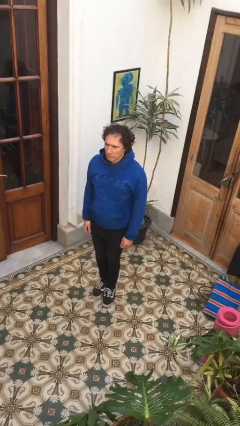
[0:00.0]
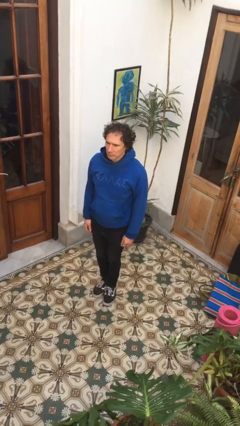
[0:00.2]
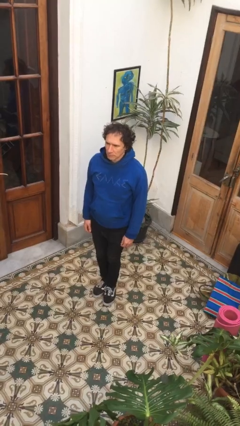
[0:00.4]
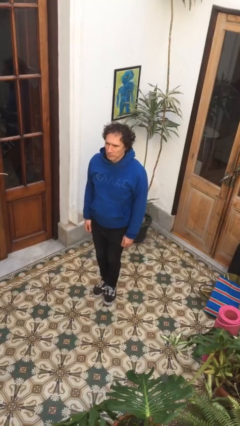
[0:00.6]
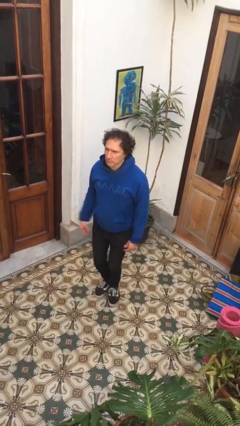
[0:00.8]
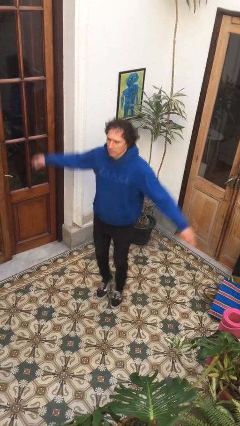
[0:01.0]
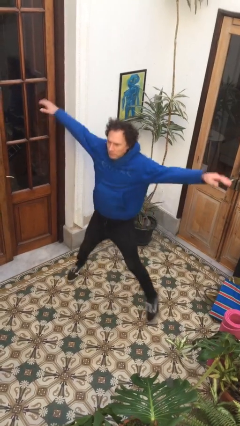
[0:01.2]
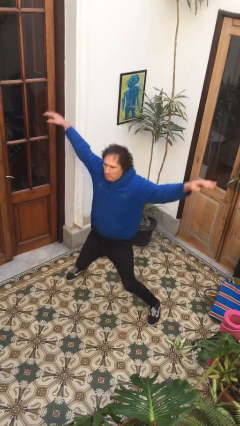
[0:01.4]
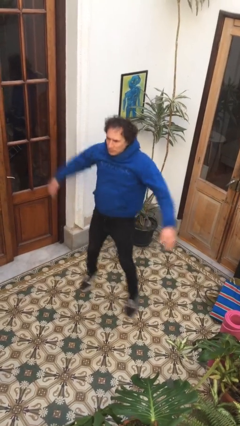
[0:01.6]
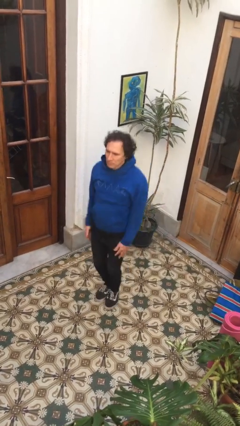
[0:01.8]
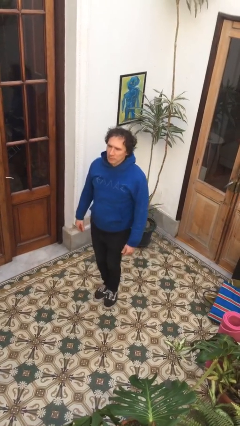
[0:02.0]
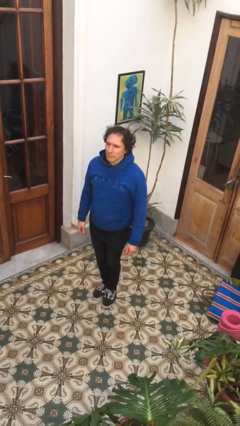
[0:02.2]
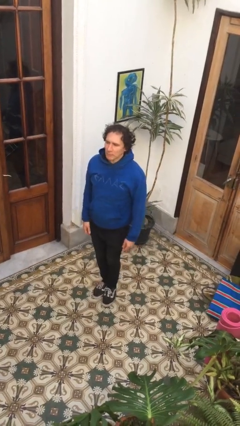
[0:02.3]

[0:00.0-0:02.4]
person exercises with jumping jacks

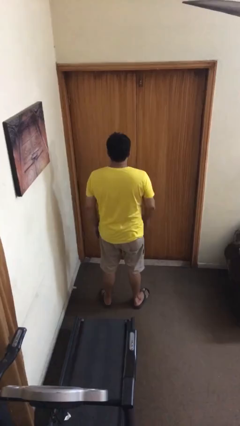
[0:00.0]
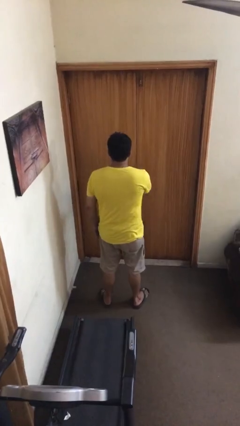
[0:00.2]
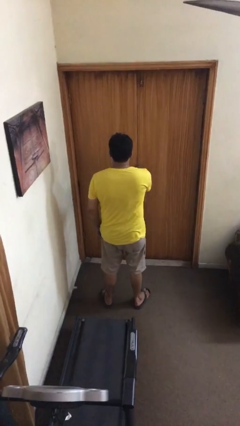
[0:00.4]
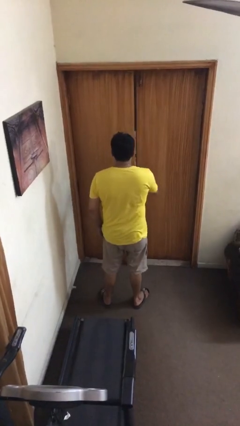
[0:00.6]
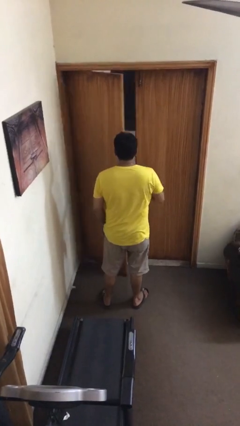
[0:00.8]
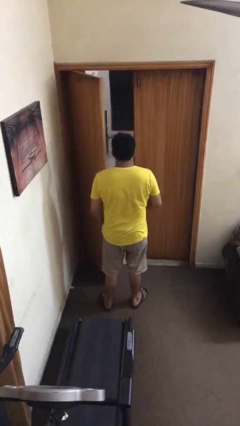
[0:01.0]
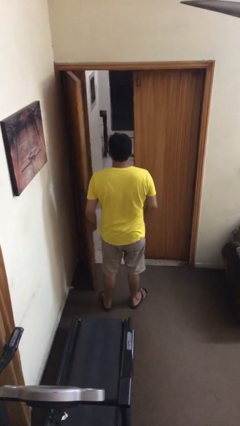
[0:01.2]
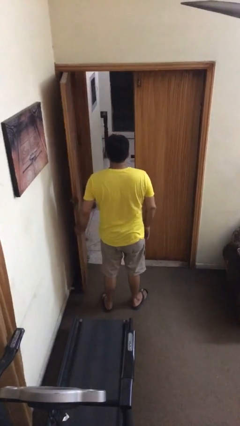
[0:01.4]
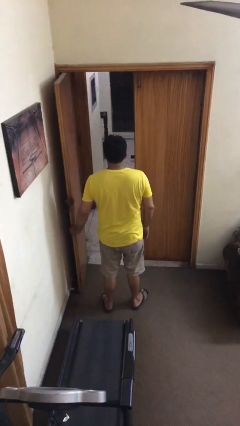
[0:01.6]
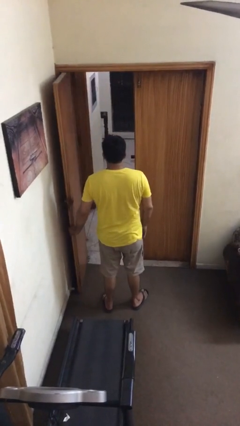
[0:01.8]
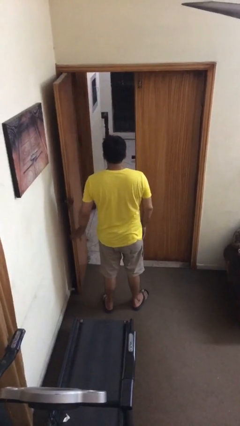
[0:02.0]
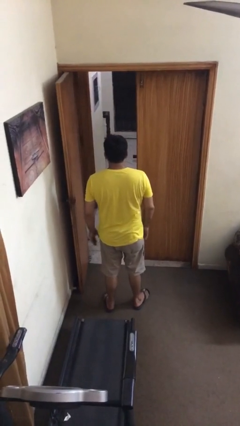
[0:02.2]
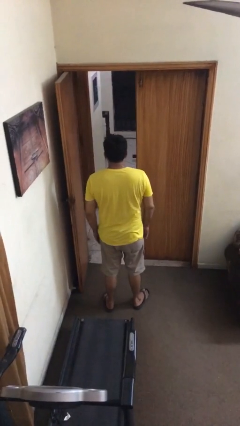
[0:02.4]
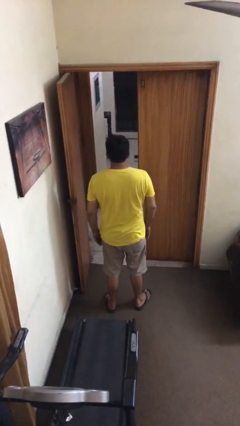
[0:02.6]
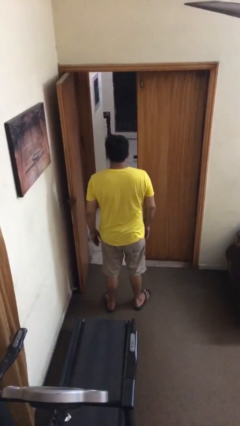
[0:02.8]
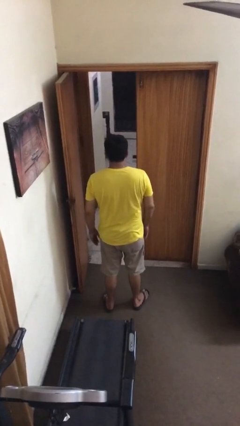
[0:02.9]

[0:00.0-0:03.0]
person opens facility door

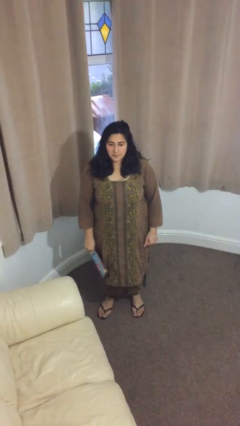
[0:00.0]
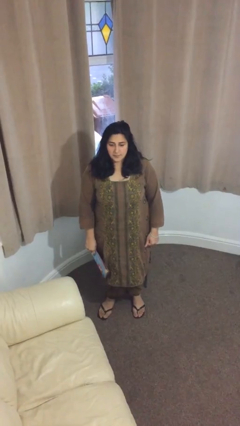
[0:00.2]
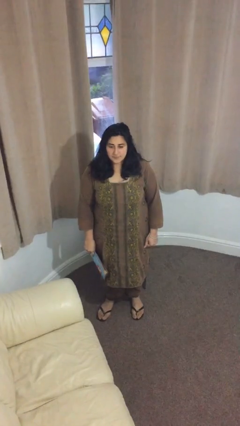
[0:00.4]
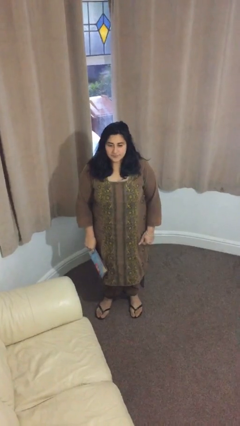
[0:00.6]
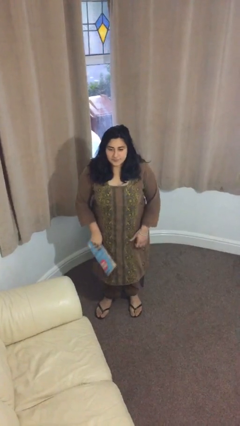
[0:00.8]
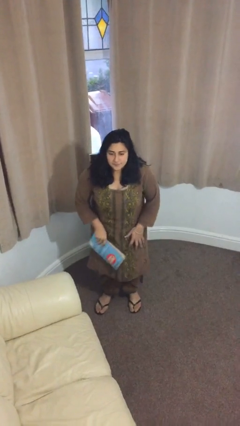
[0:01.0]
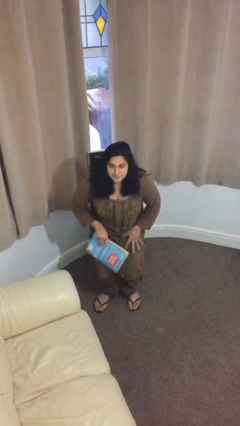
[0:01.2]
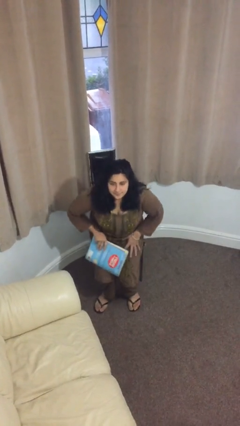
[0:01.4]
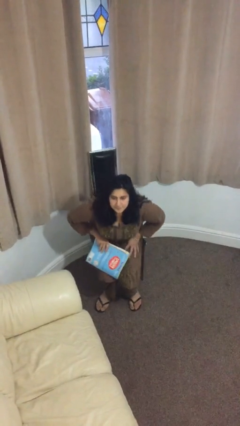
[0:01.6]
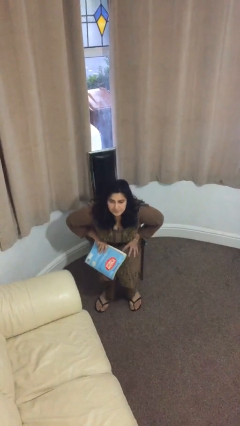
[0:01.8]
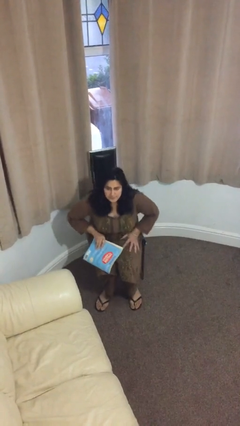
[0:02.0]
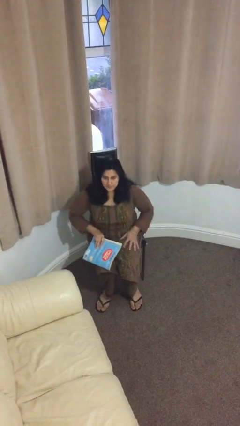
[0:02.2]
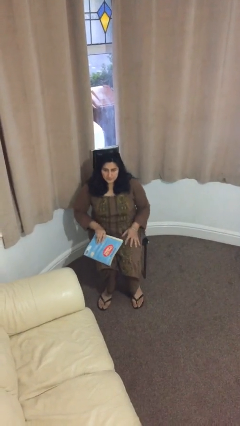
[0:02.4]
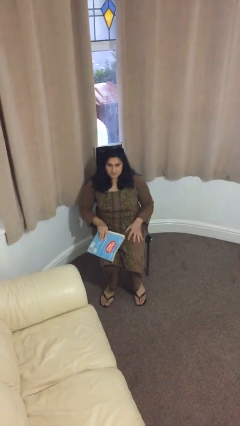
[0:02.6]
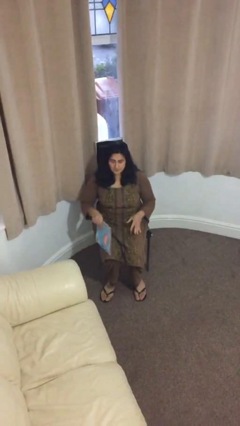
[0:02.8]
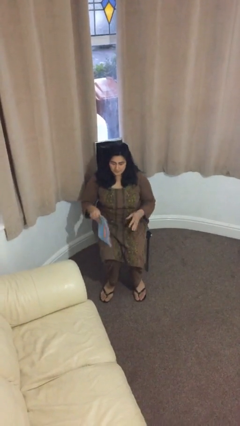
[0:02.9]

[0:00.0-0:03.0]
person sits down

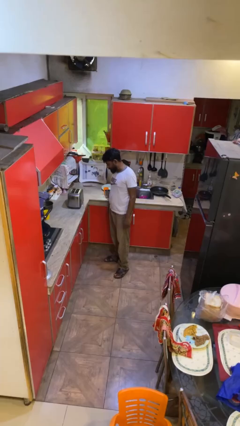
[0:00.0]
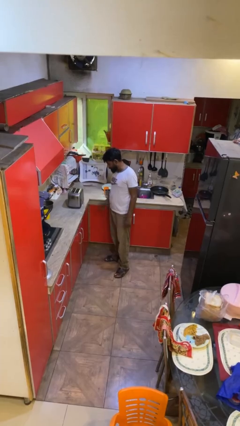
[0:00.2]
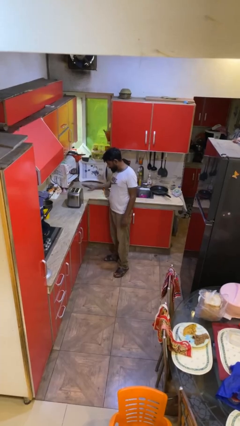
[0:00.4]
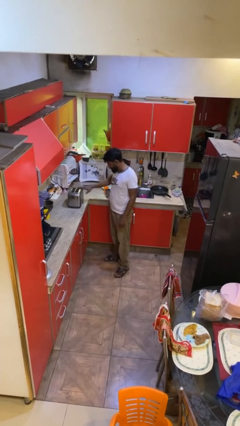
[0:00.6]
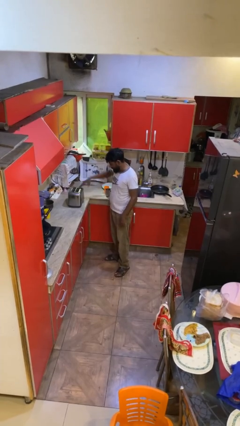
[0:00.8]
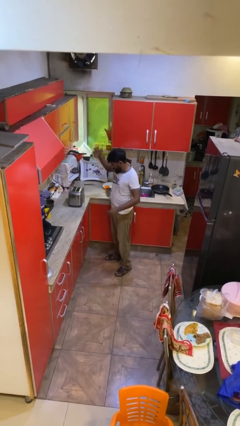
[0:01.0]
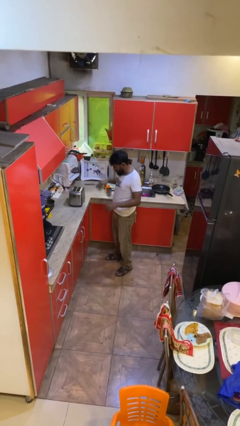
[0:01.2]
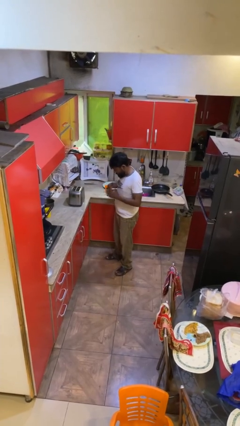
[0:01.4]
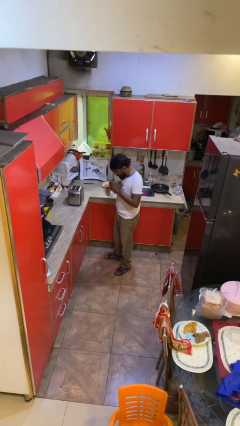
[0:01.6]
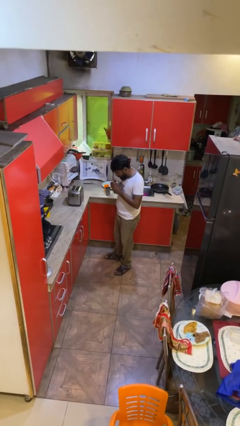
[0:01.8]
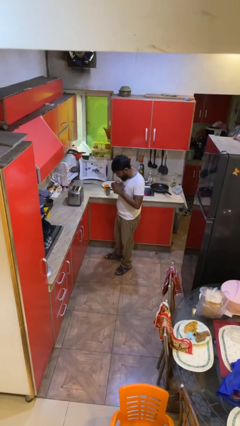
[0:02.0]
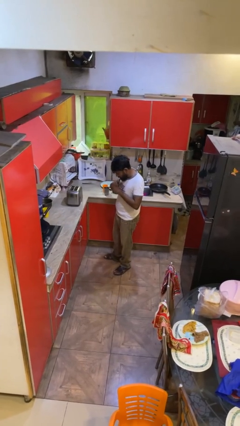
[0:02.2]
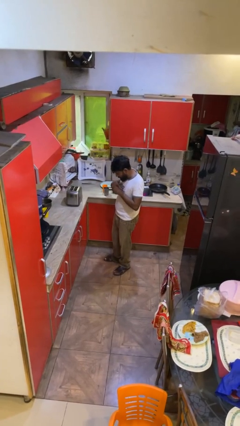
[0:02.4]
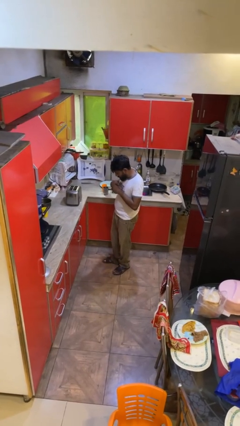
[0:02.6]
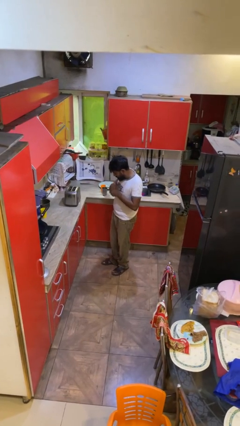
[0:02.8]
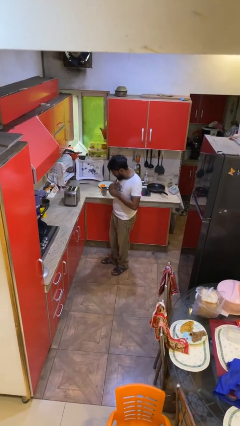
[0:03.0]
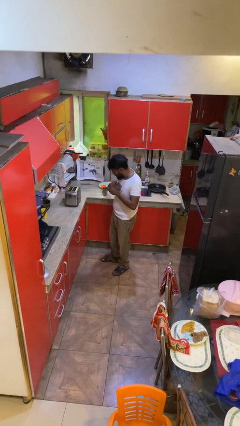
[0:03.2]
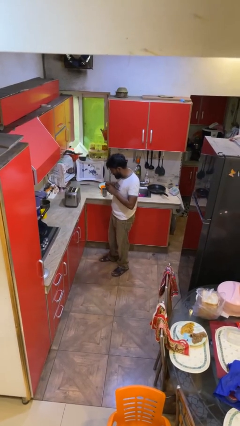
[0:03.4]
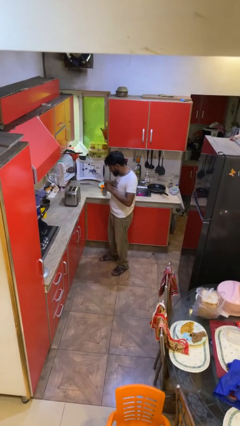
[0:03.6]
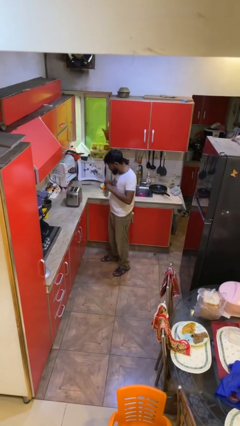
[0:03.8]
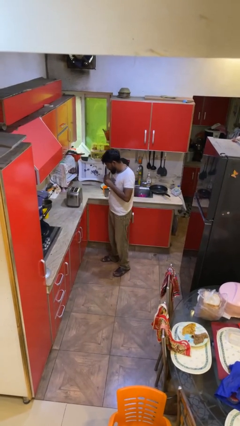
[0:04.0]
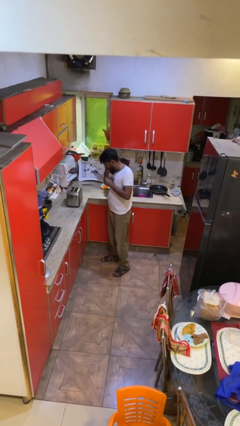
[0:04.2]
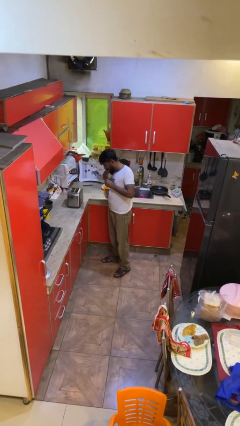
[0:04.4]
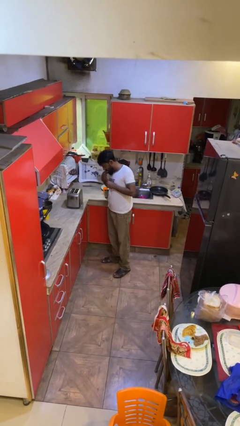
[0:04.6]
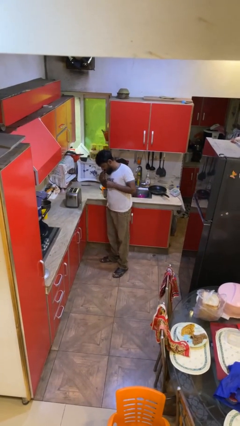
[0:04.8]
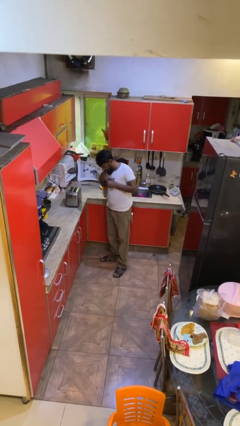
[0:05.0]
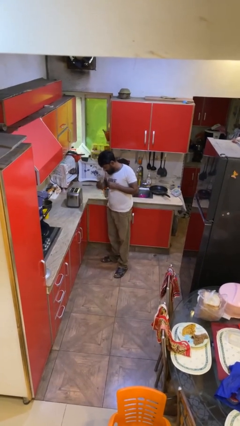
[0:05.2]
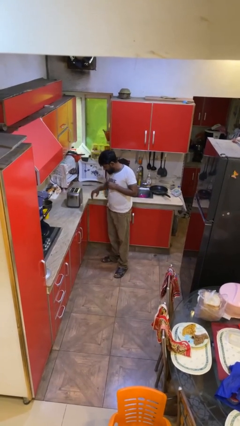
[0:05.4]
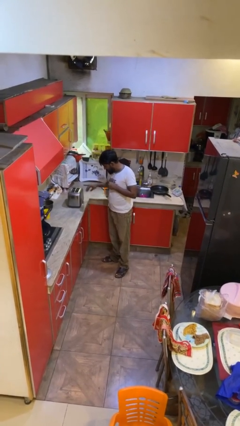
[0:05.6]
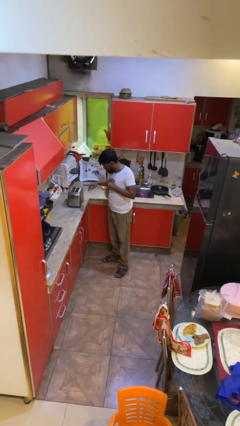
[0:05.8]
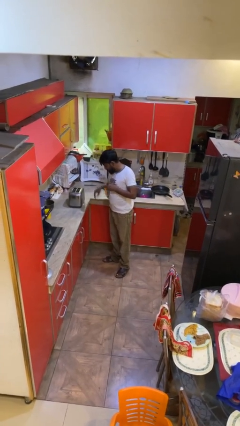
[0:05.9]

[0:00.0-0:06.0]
person burns hand

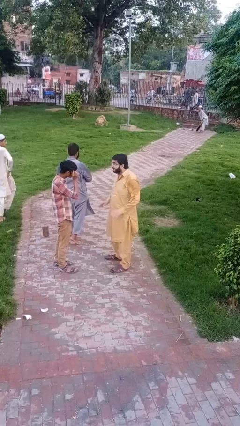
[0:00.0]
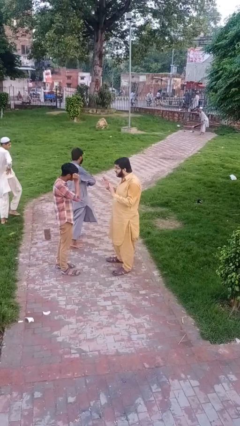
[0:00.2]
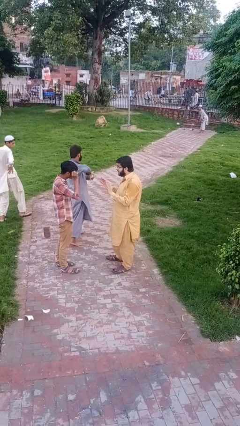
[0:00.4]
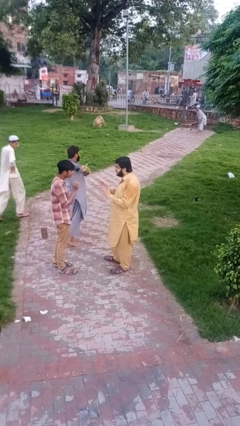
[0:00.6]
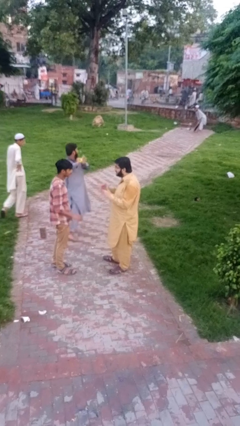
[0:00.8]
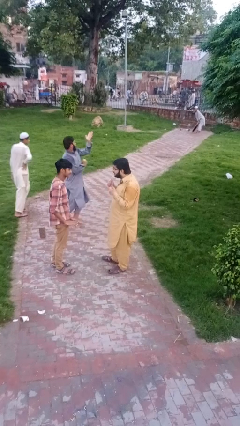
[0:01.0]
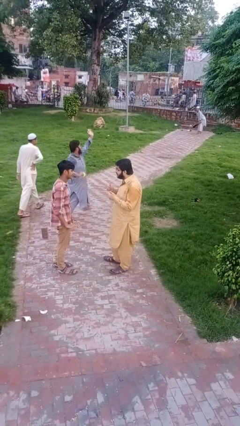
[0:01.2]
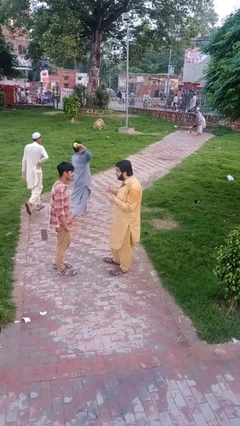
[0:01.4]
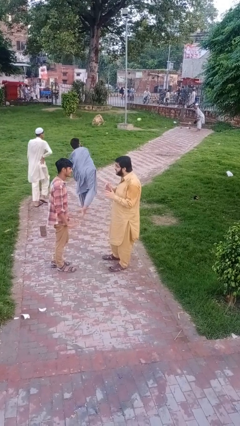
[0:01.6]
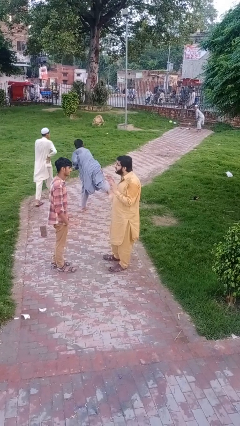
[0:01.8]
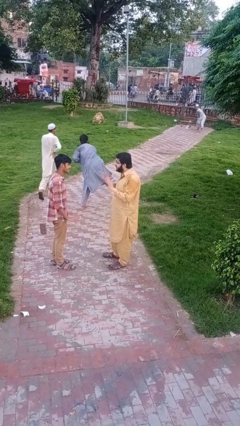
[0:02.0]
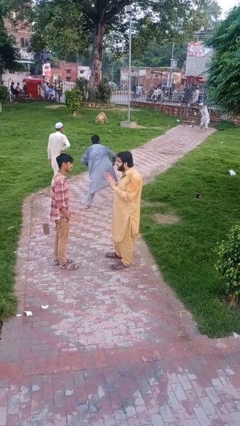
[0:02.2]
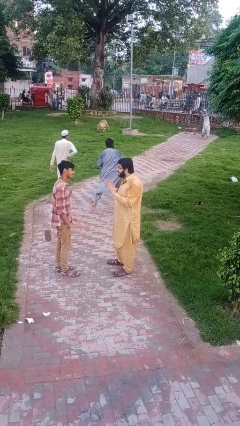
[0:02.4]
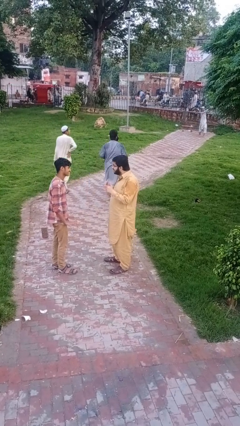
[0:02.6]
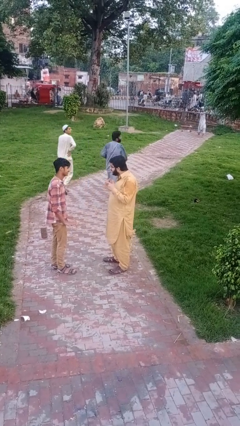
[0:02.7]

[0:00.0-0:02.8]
person talks to person
